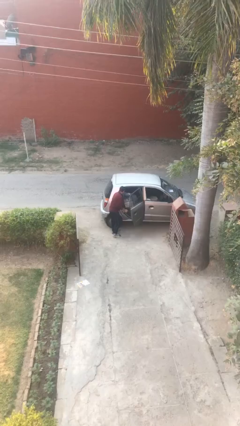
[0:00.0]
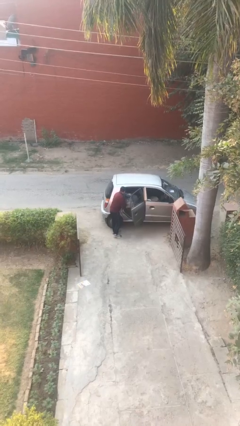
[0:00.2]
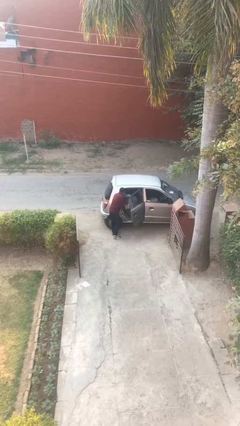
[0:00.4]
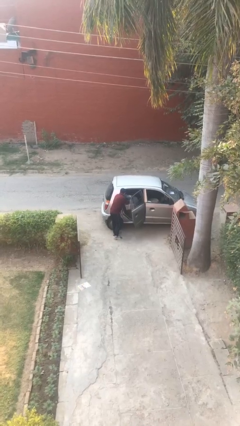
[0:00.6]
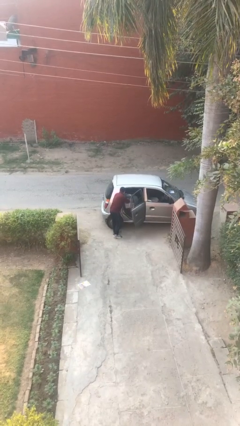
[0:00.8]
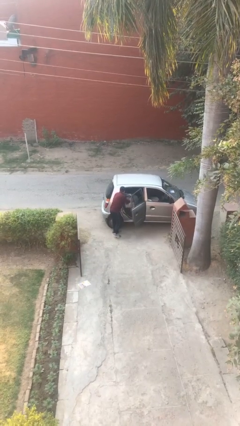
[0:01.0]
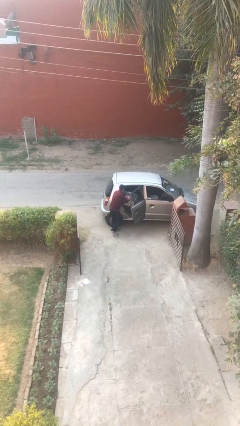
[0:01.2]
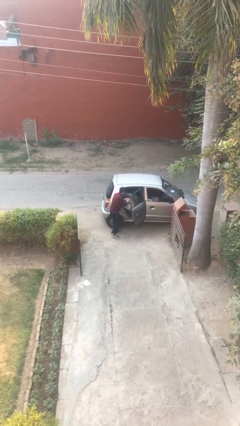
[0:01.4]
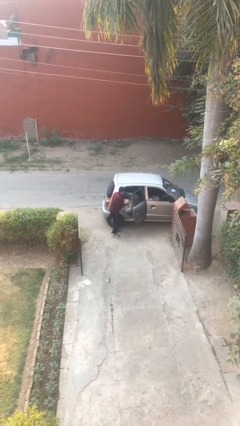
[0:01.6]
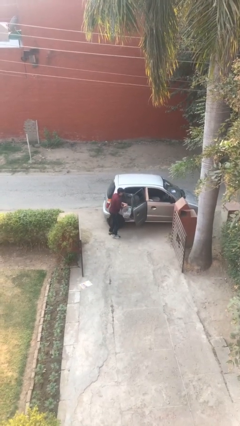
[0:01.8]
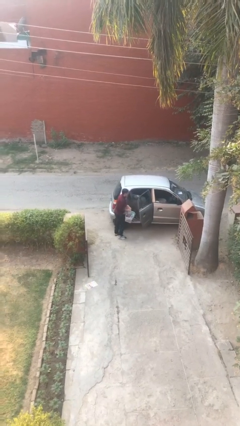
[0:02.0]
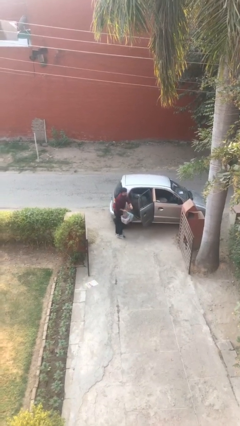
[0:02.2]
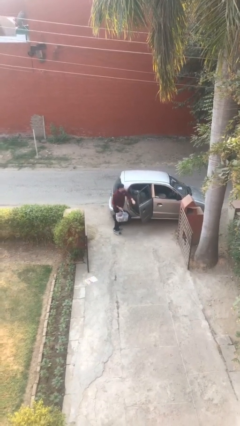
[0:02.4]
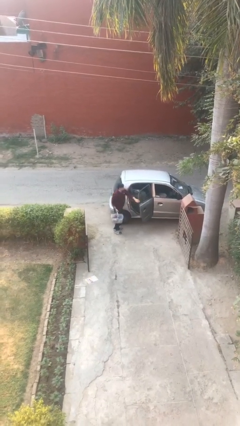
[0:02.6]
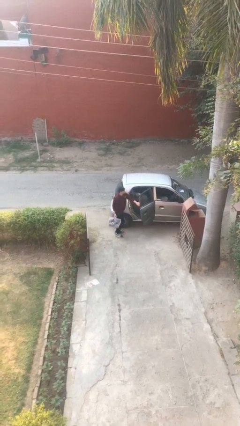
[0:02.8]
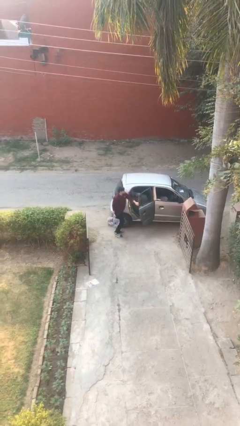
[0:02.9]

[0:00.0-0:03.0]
person unloads car

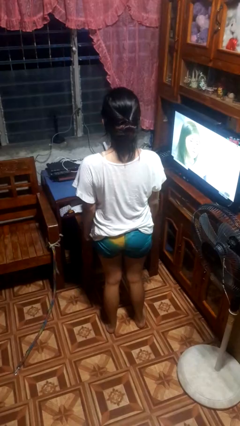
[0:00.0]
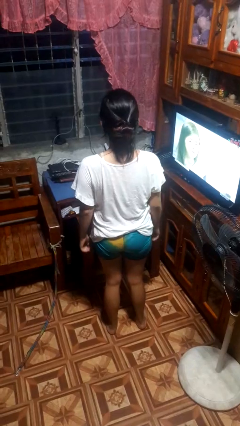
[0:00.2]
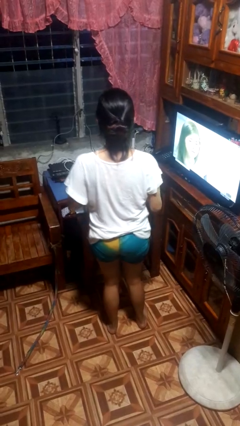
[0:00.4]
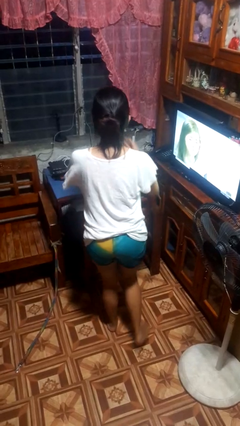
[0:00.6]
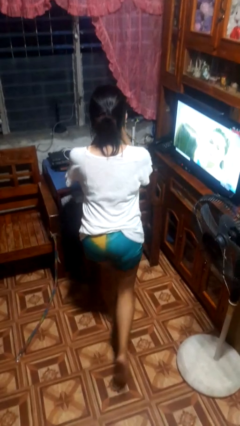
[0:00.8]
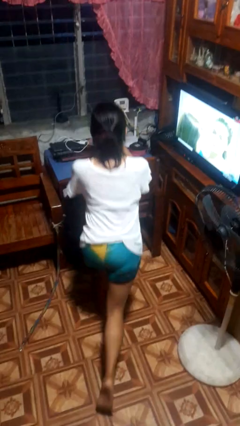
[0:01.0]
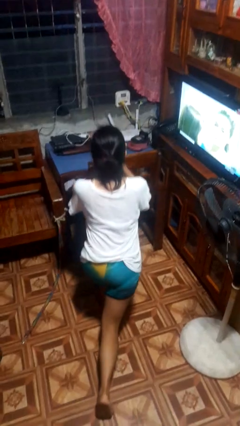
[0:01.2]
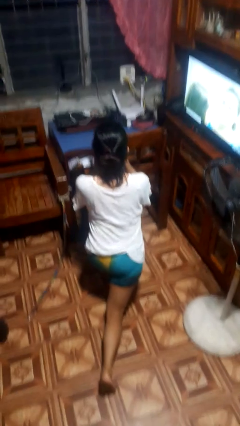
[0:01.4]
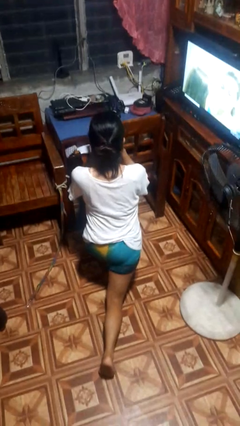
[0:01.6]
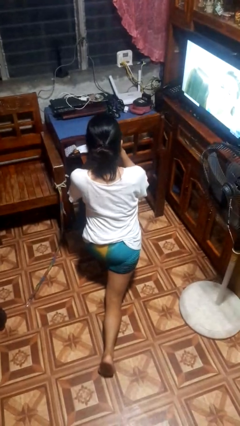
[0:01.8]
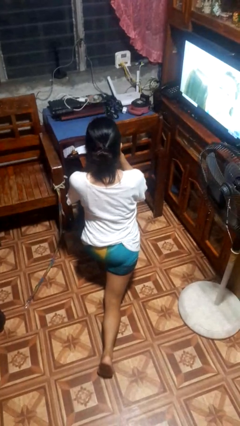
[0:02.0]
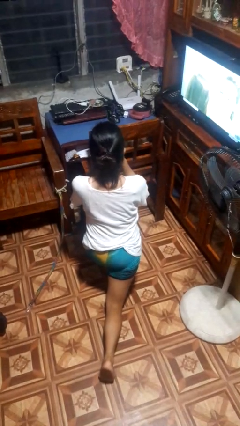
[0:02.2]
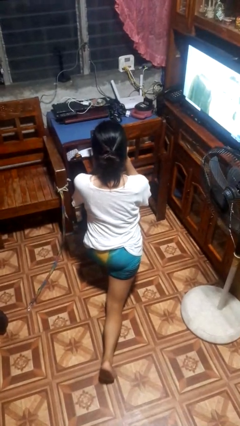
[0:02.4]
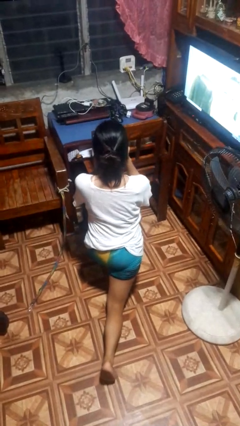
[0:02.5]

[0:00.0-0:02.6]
person exercises with lunges

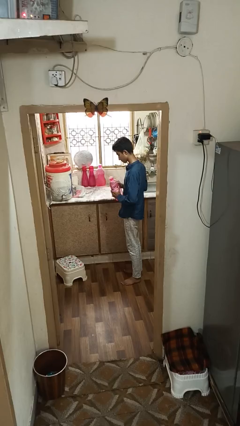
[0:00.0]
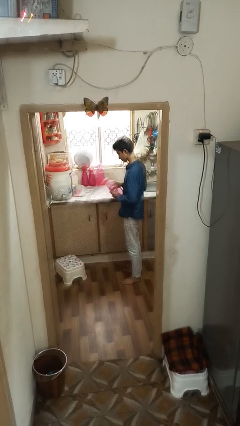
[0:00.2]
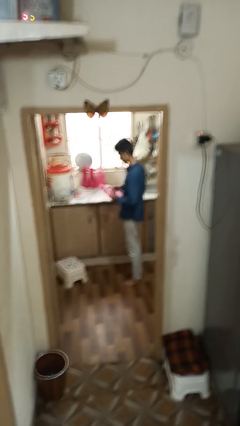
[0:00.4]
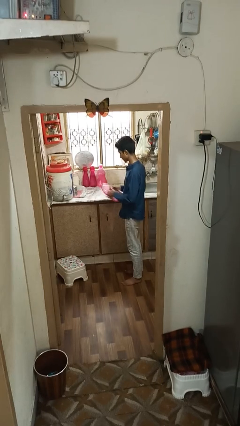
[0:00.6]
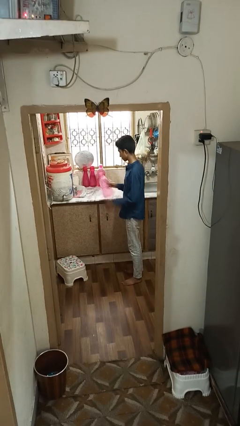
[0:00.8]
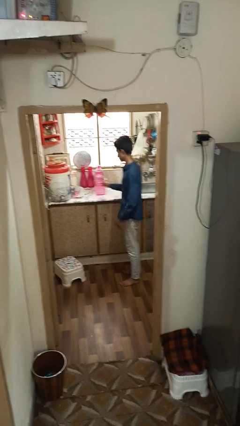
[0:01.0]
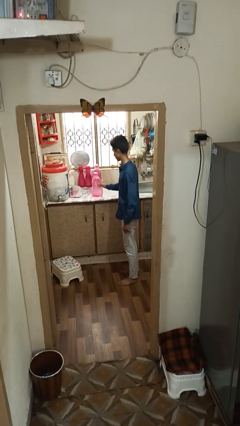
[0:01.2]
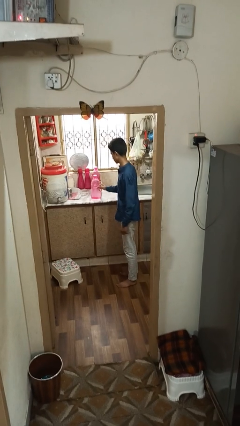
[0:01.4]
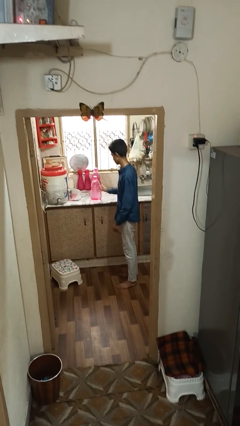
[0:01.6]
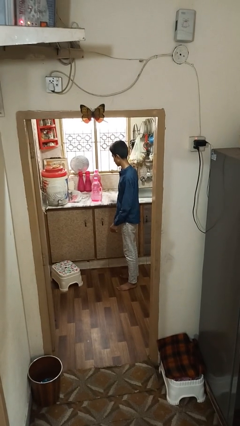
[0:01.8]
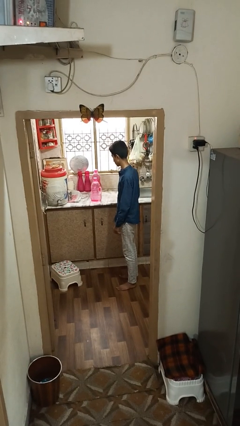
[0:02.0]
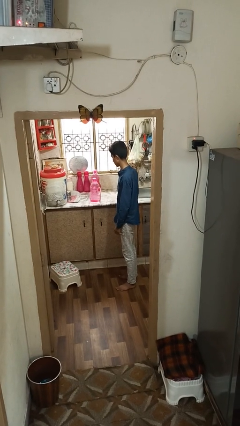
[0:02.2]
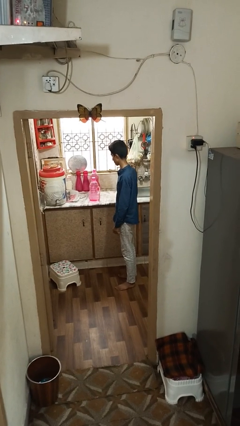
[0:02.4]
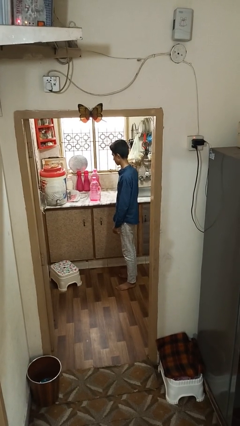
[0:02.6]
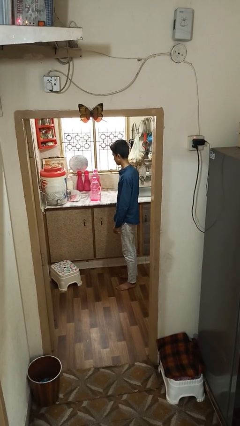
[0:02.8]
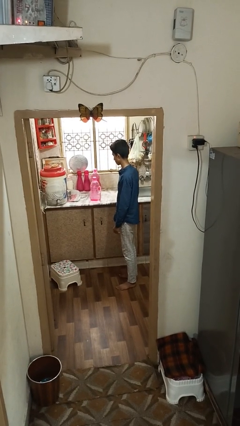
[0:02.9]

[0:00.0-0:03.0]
person puts down object on countertop

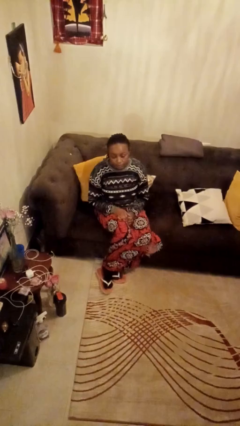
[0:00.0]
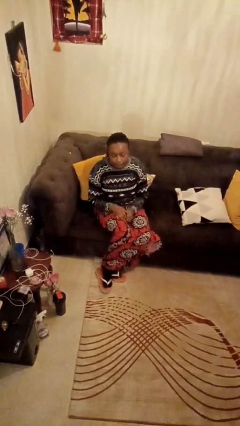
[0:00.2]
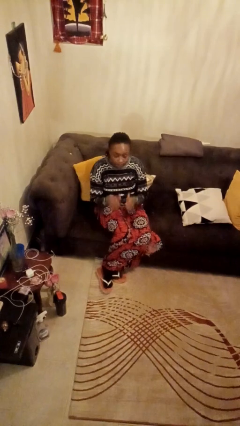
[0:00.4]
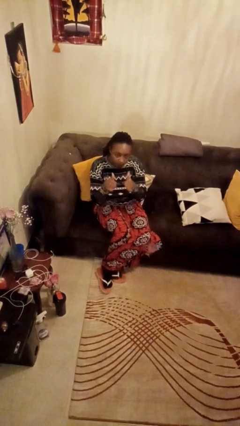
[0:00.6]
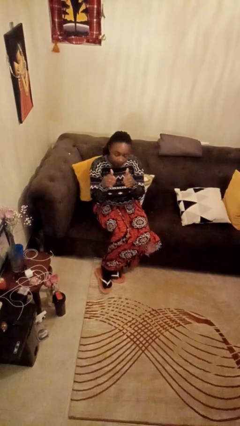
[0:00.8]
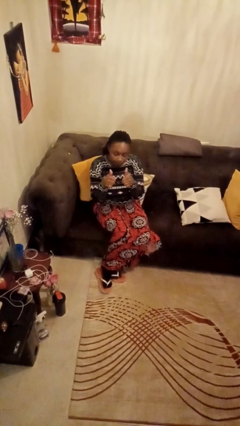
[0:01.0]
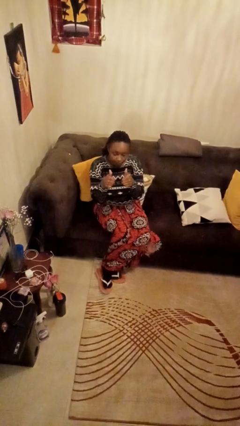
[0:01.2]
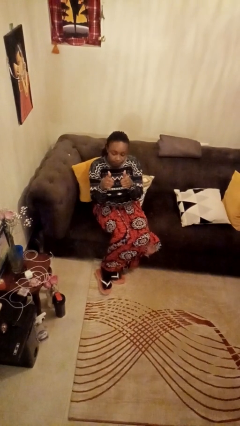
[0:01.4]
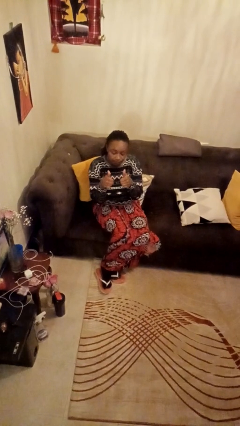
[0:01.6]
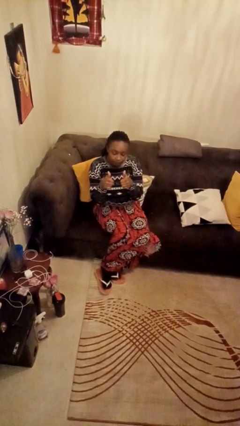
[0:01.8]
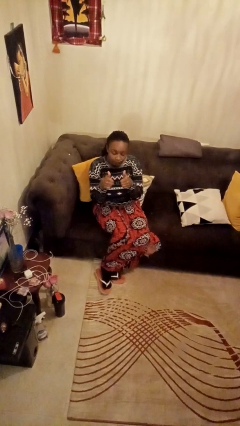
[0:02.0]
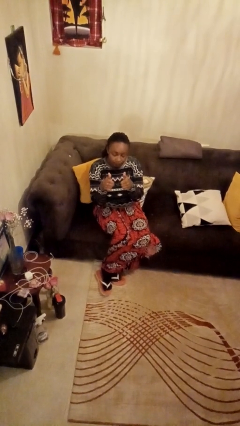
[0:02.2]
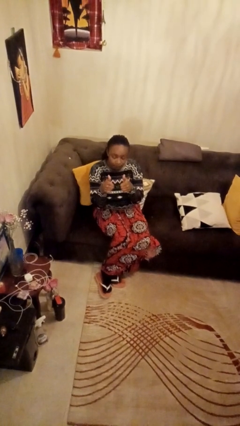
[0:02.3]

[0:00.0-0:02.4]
person gestures thumbs up

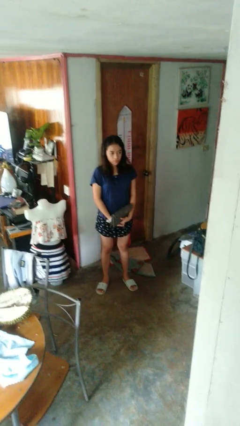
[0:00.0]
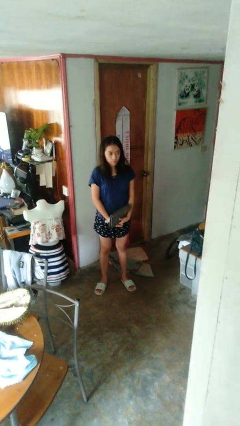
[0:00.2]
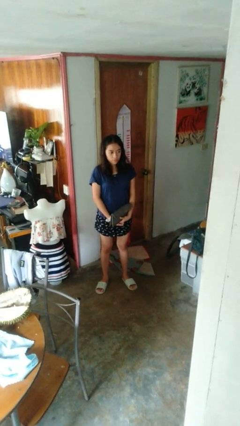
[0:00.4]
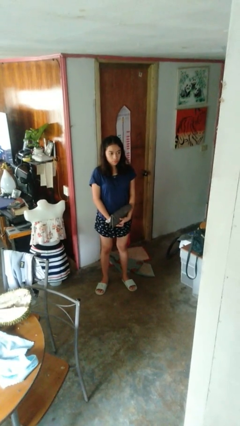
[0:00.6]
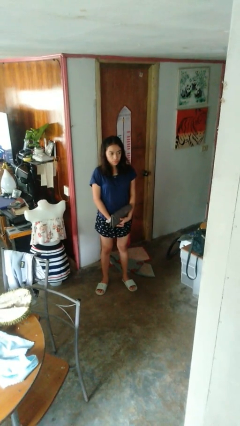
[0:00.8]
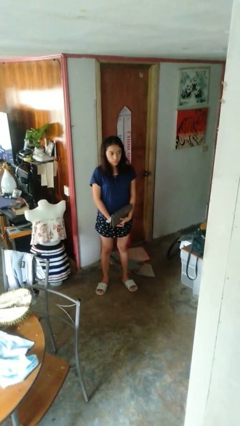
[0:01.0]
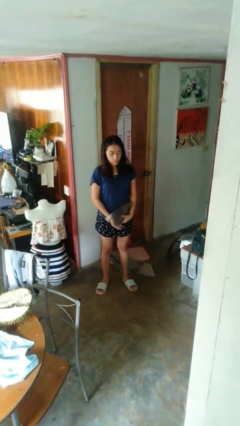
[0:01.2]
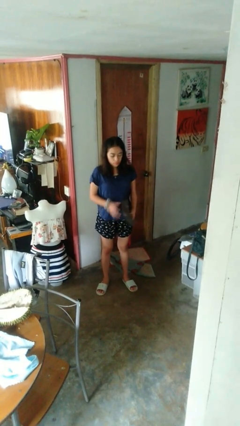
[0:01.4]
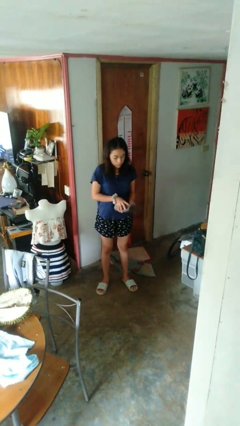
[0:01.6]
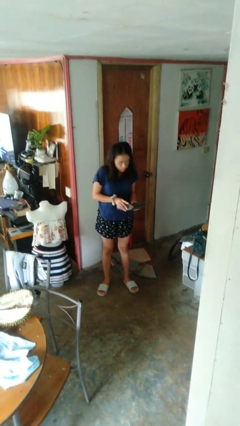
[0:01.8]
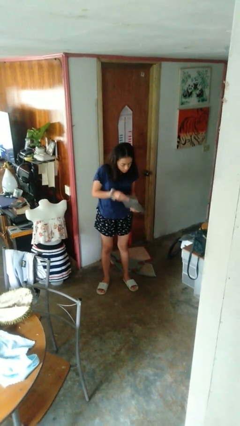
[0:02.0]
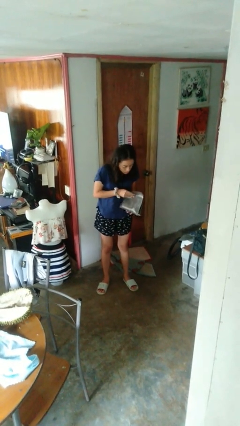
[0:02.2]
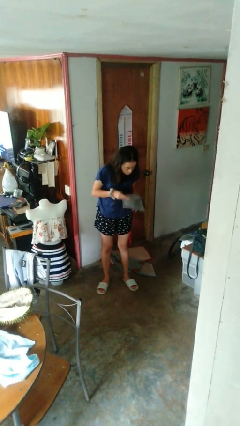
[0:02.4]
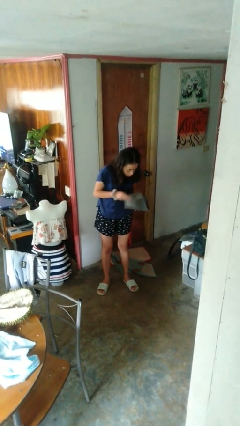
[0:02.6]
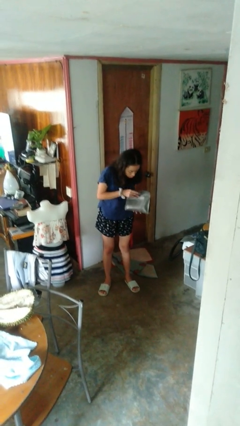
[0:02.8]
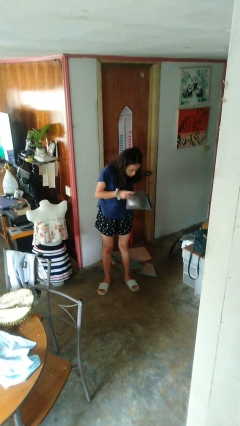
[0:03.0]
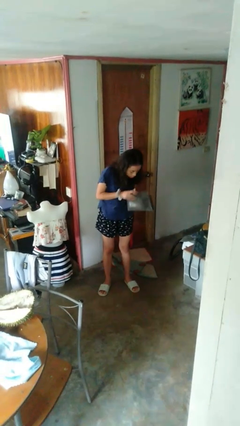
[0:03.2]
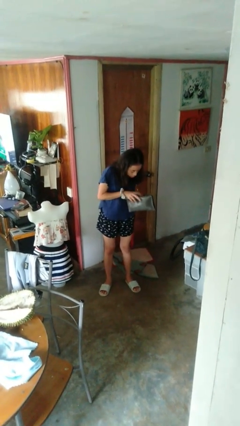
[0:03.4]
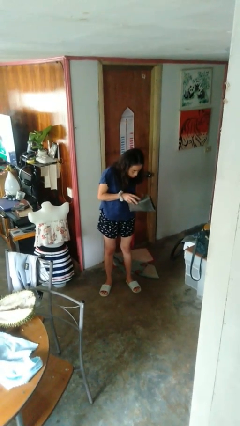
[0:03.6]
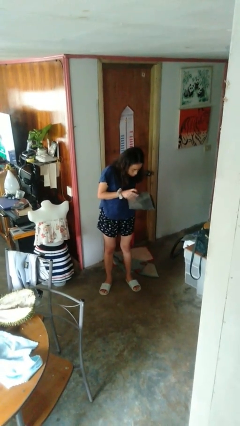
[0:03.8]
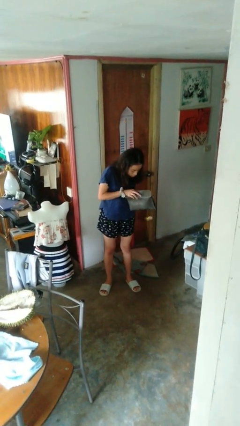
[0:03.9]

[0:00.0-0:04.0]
person searches in purse

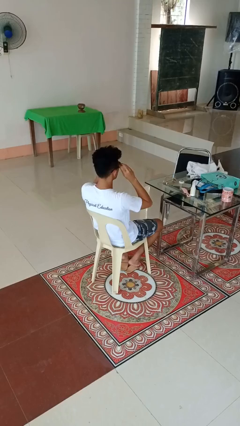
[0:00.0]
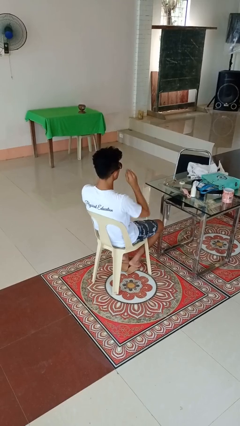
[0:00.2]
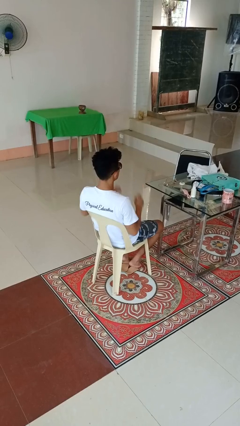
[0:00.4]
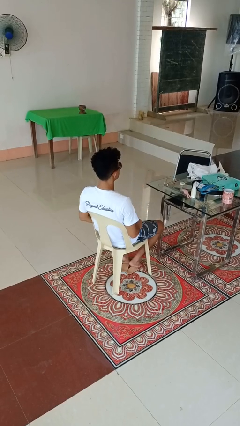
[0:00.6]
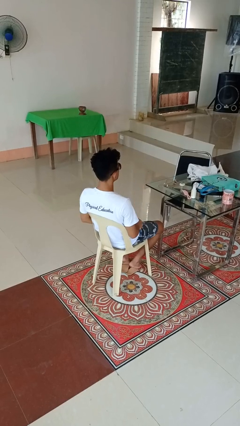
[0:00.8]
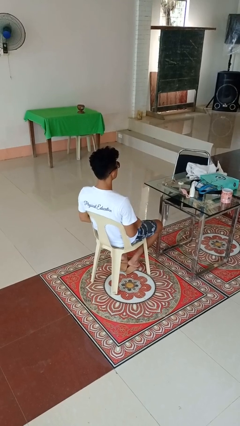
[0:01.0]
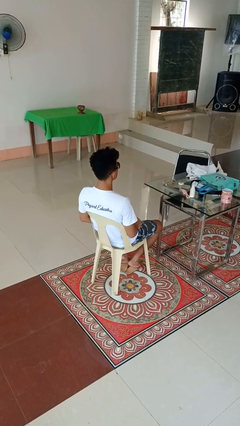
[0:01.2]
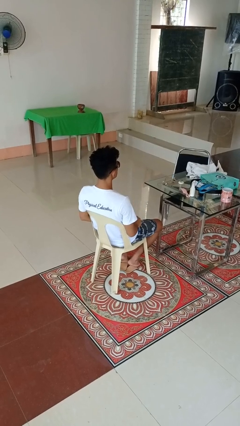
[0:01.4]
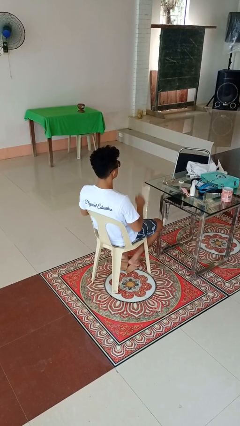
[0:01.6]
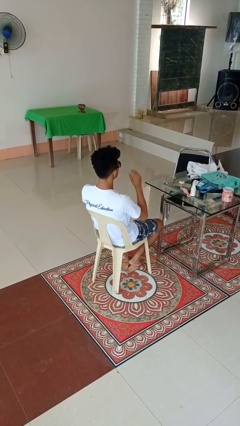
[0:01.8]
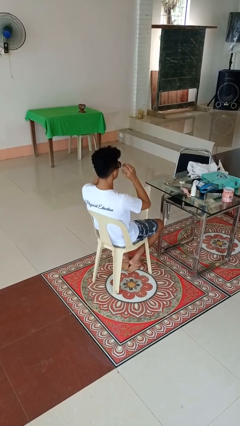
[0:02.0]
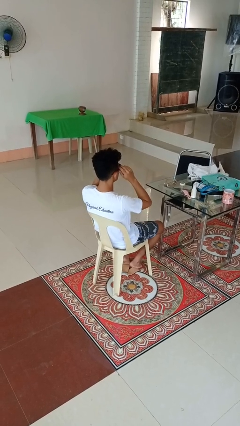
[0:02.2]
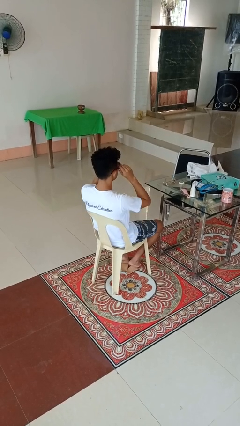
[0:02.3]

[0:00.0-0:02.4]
person puts on sunglasses
